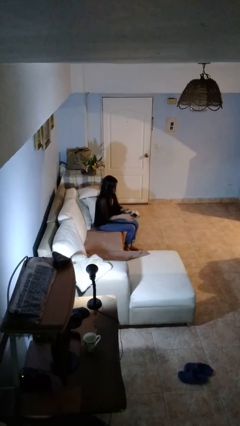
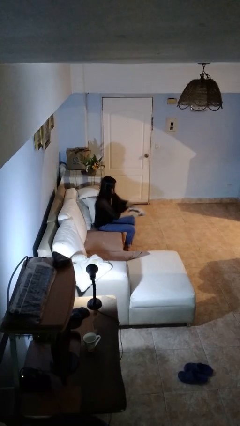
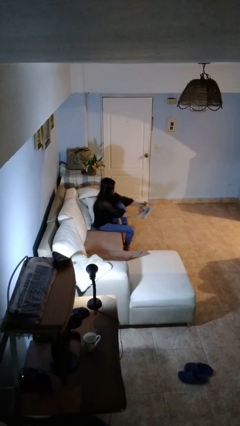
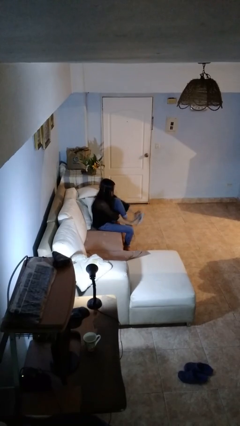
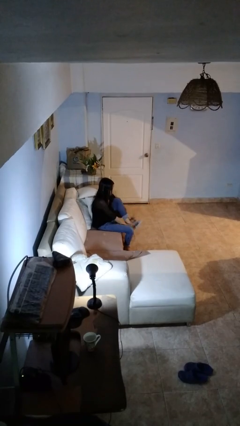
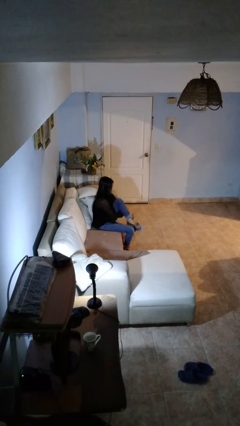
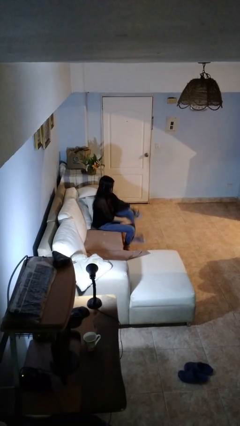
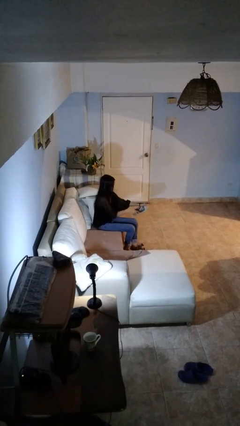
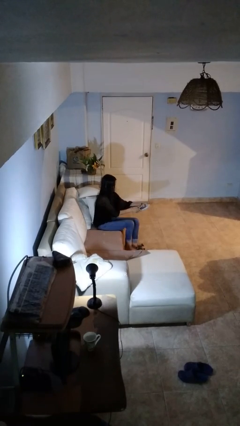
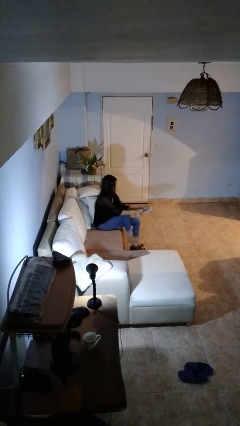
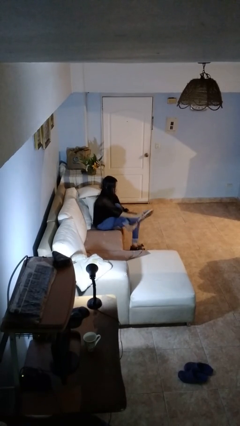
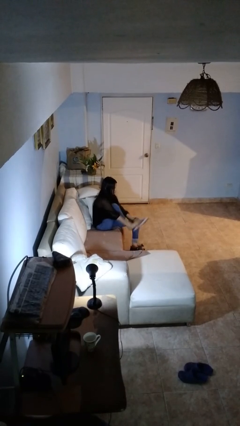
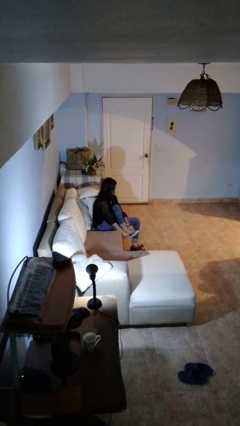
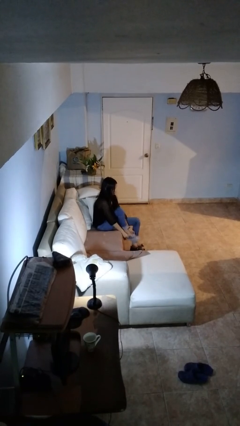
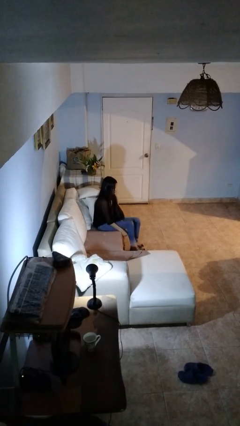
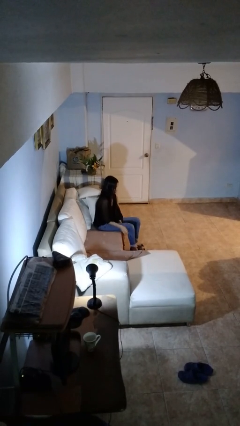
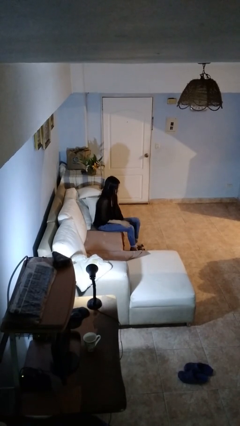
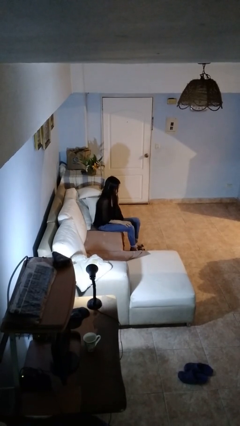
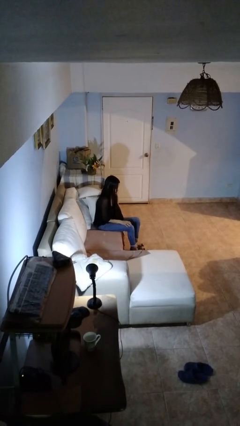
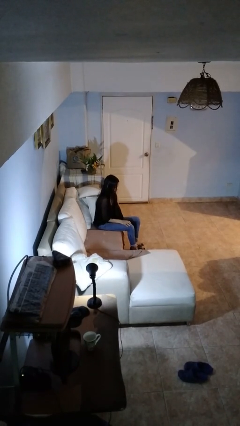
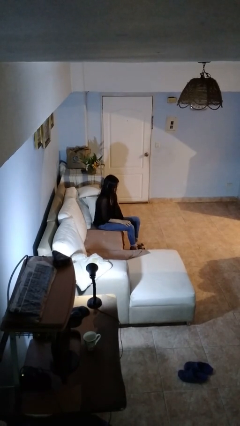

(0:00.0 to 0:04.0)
person puts on shoes

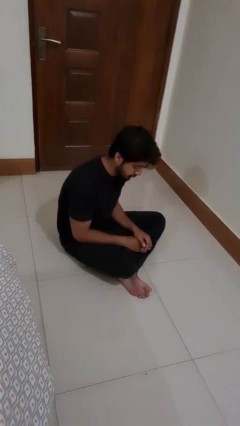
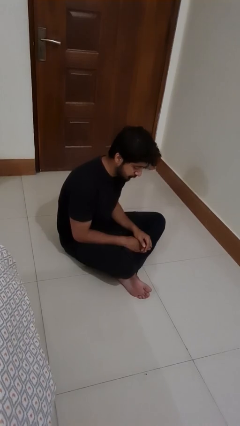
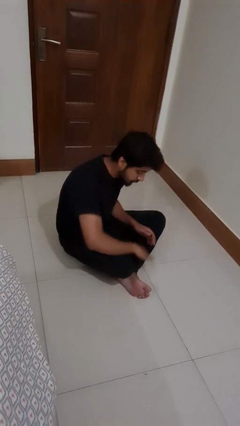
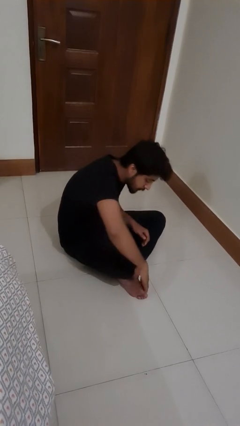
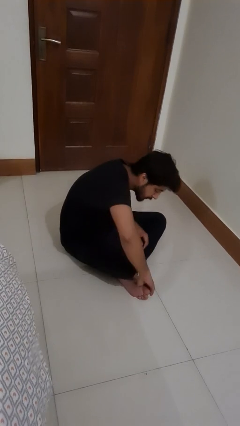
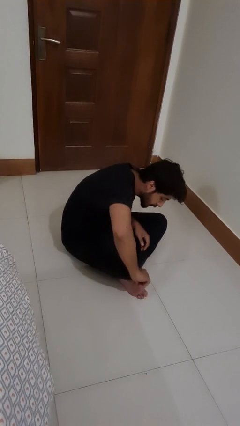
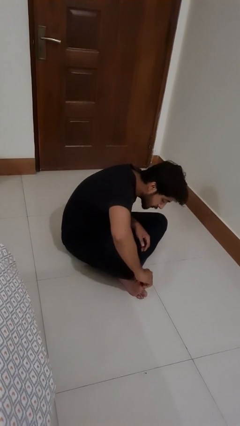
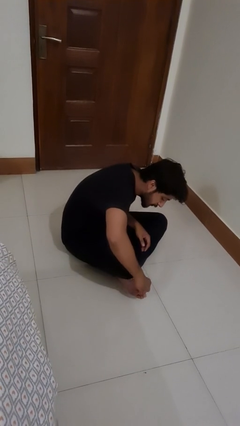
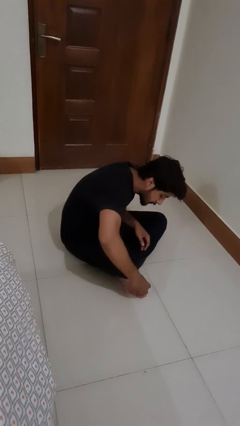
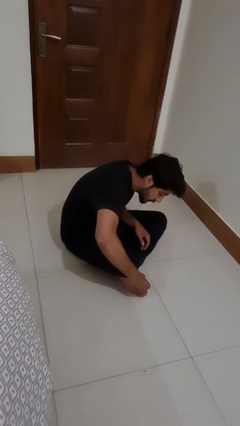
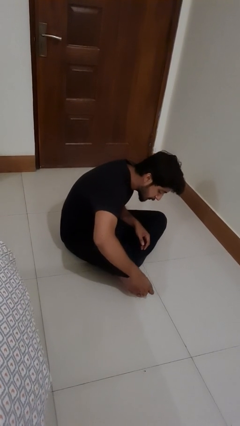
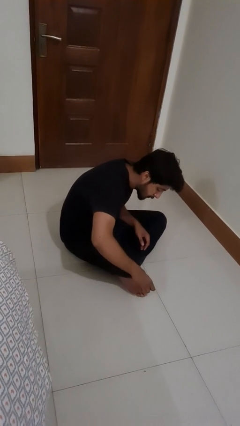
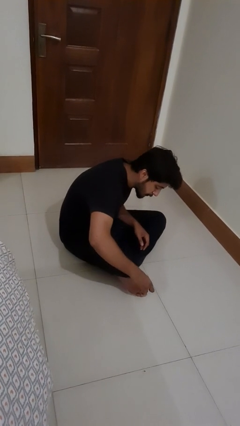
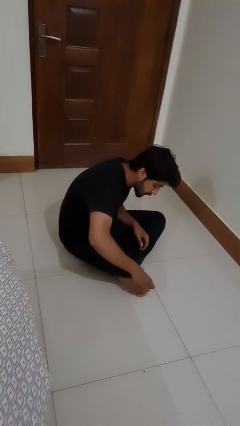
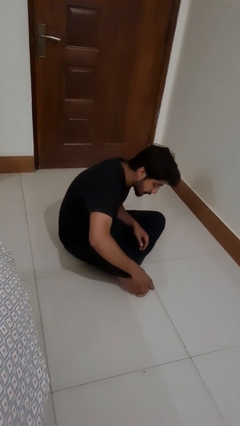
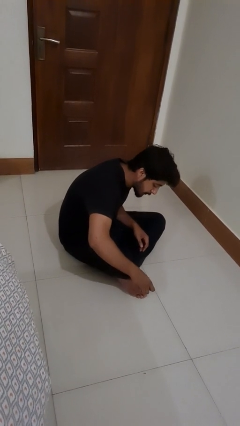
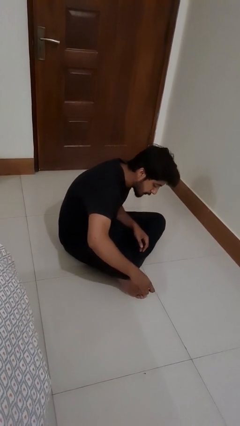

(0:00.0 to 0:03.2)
person swats bug

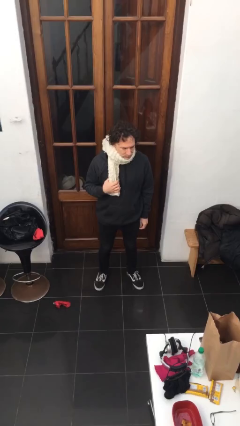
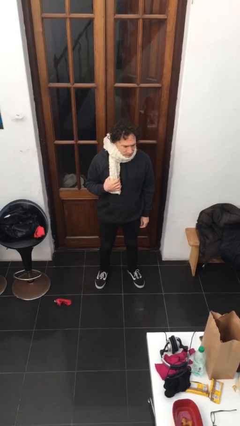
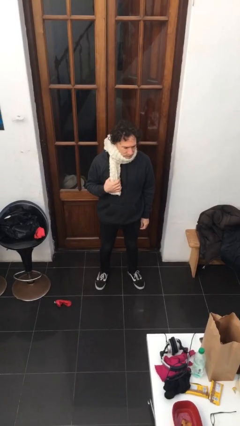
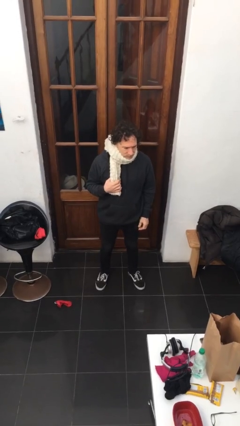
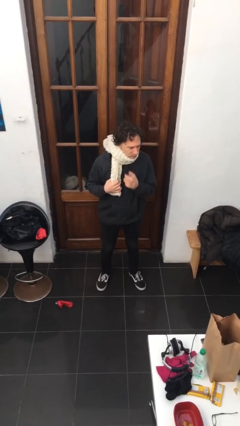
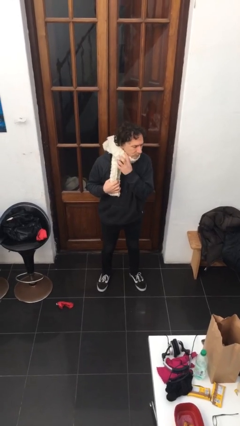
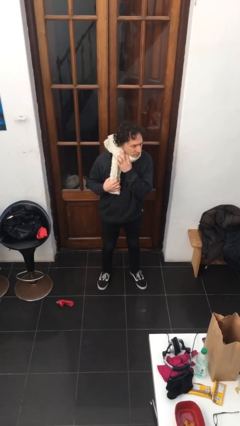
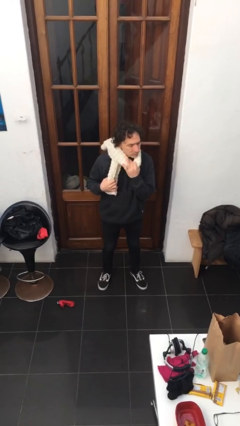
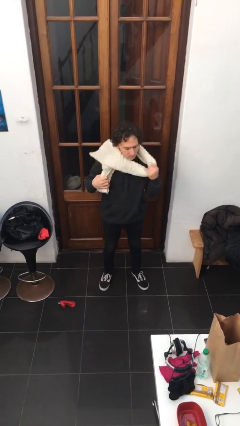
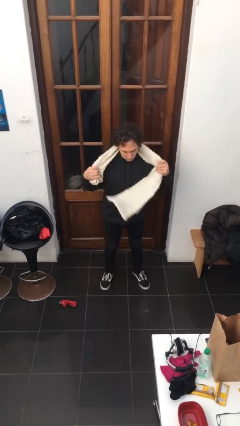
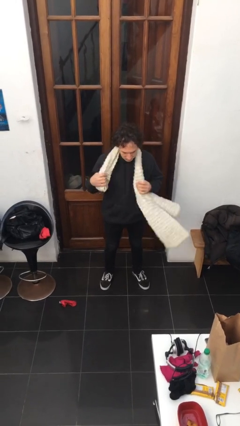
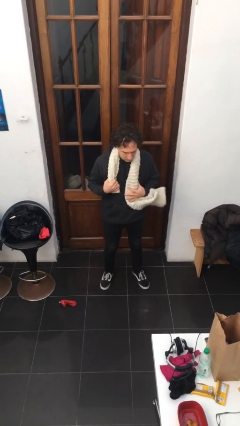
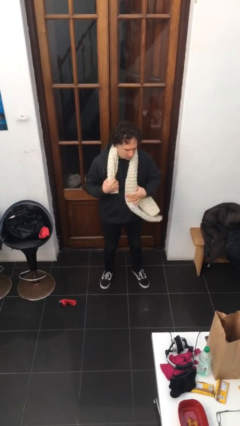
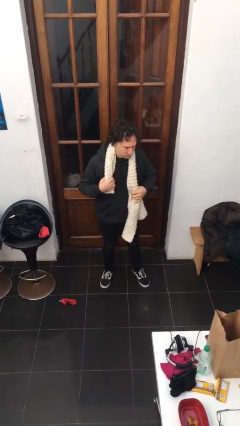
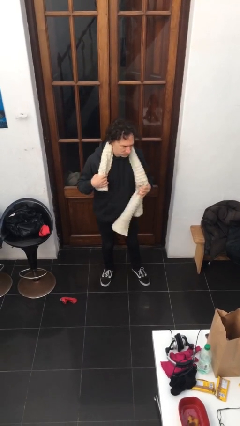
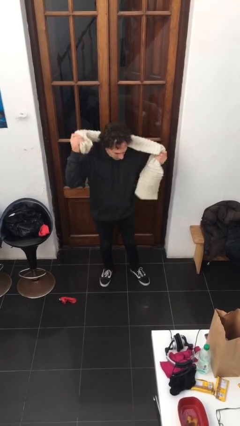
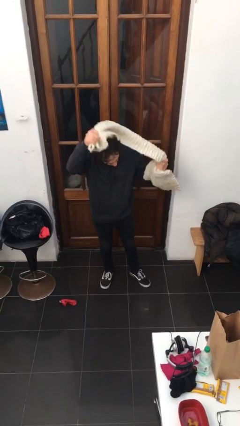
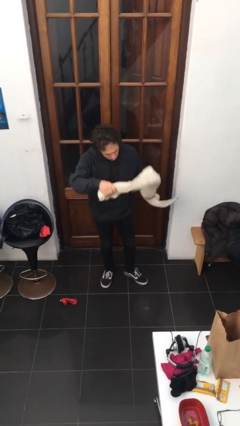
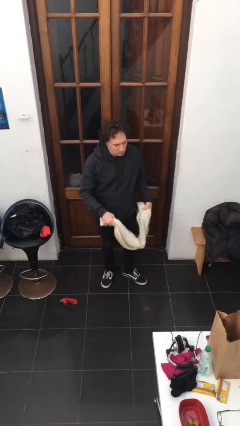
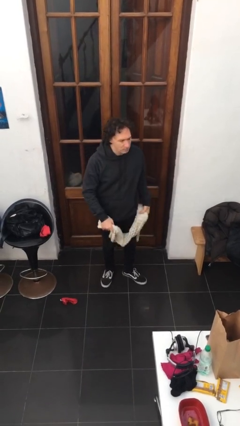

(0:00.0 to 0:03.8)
person takes off scarf

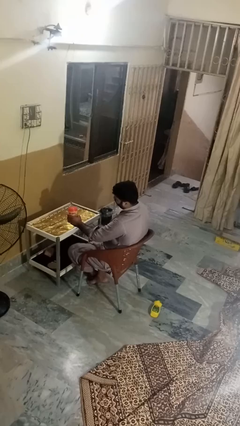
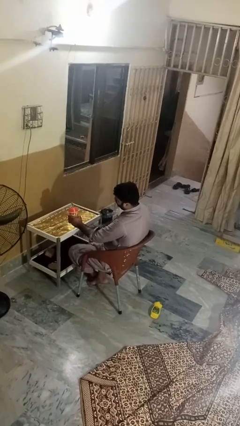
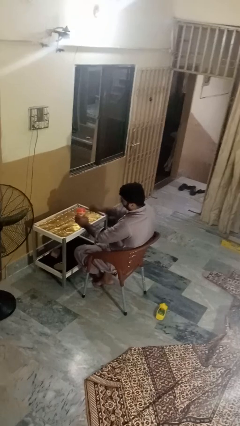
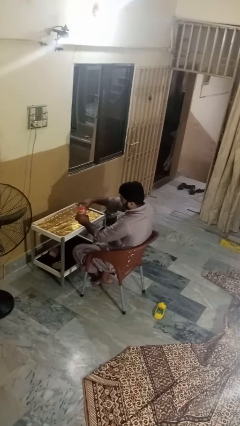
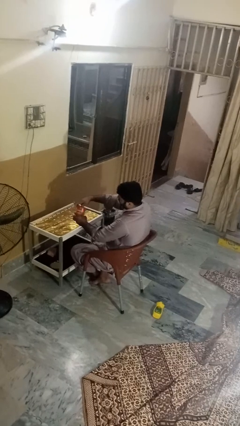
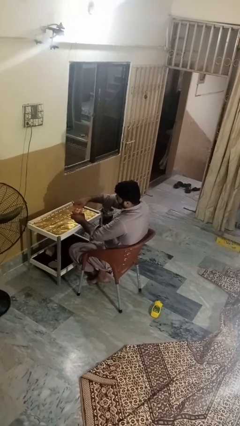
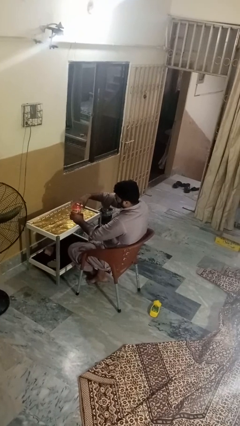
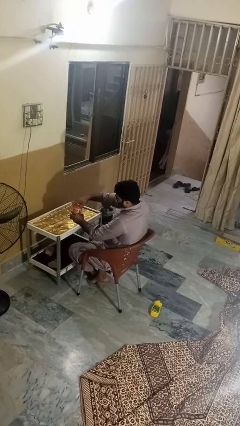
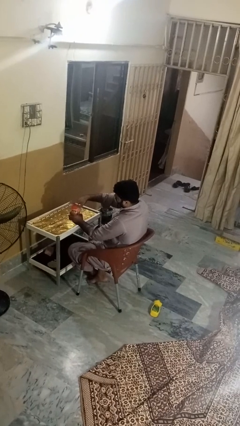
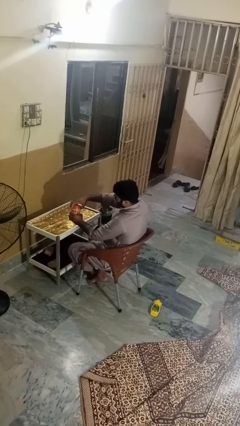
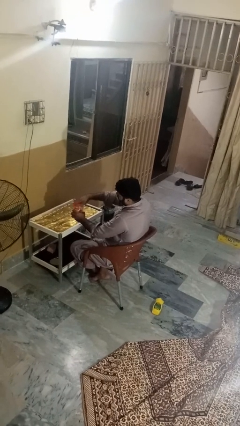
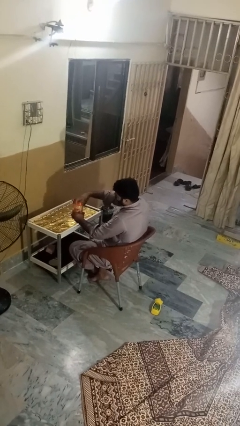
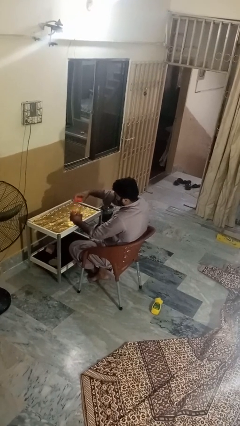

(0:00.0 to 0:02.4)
person opens jar

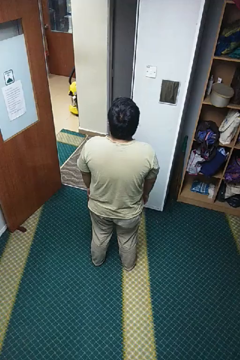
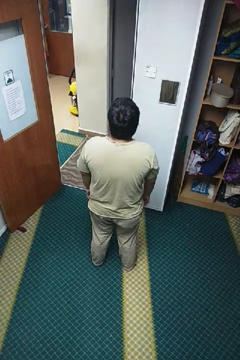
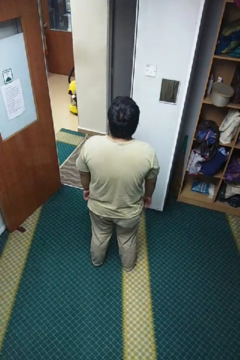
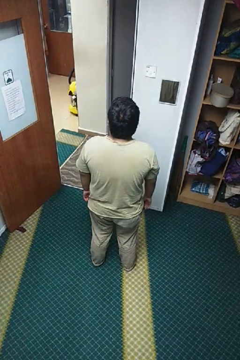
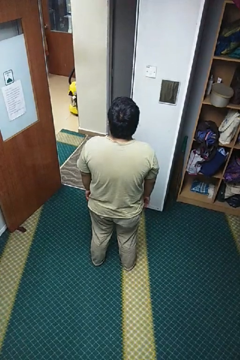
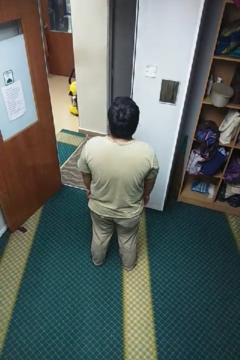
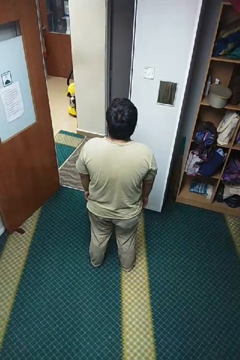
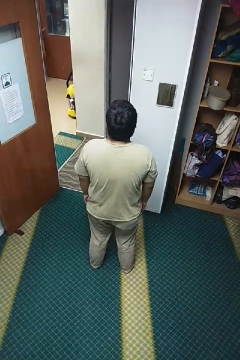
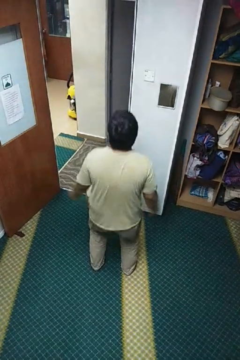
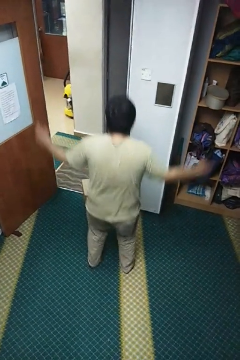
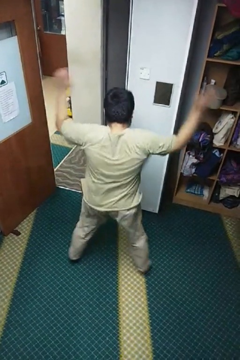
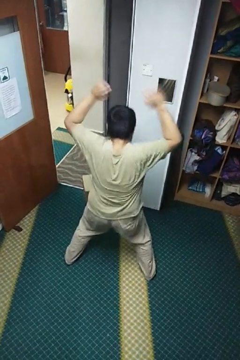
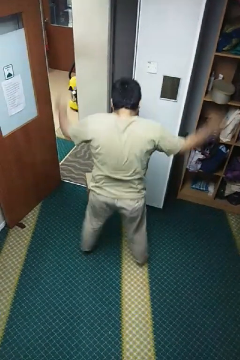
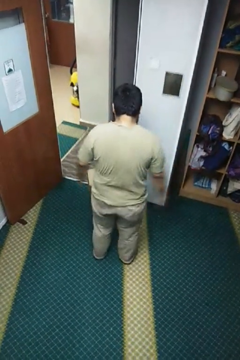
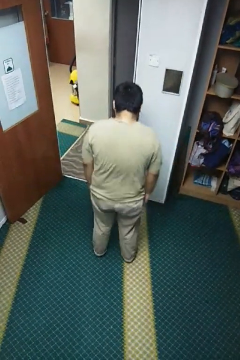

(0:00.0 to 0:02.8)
person exercises with jumping jacks

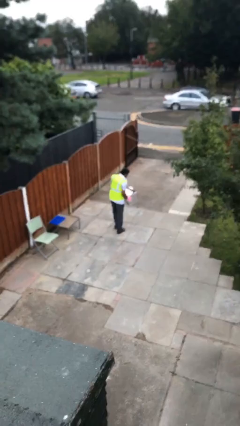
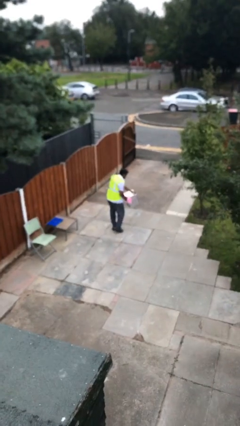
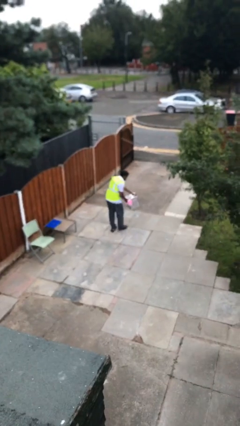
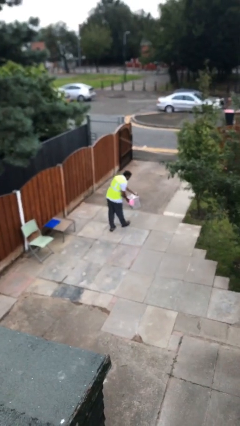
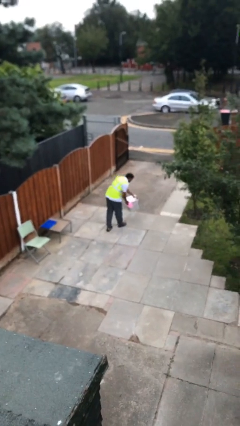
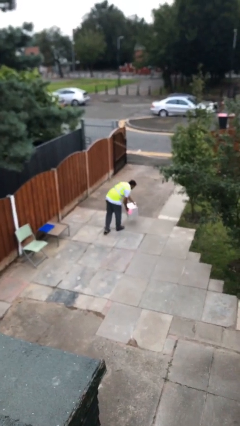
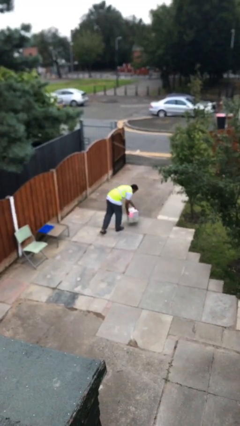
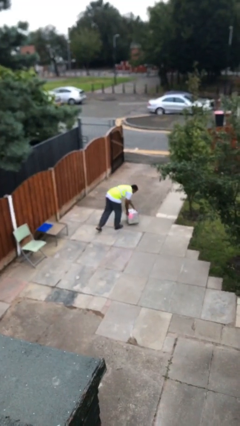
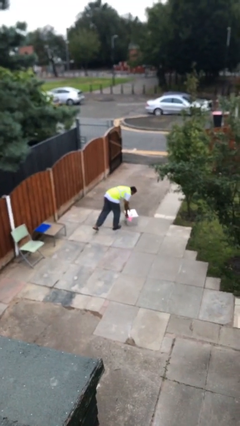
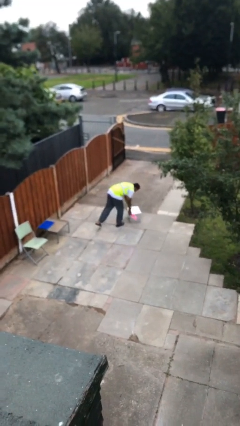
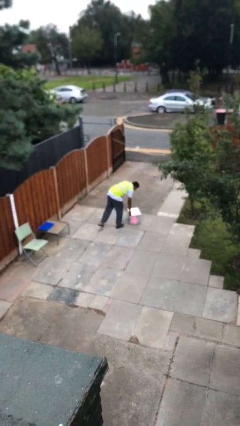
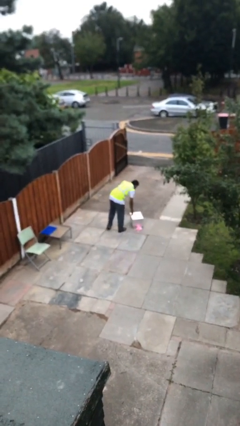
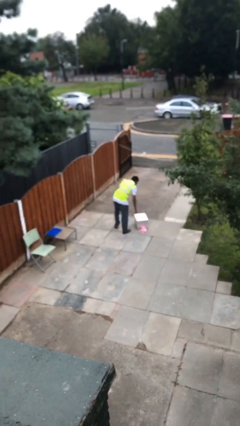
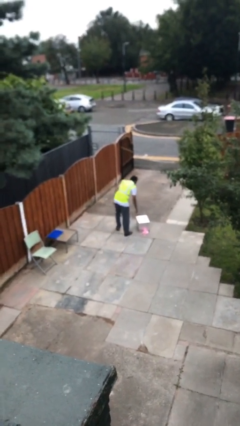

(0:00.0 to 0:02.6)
person puts down object on floor
